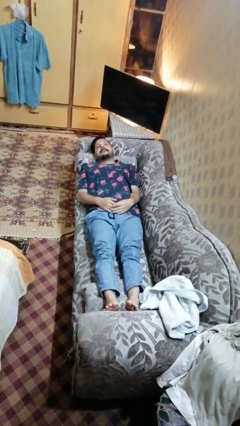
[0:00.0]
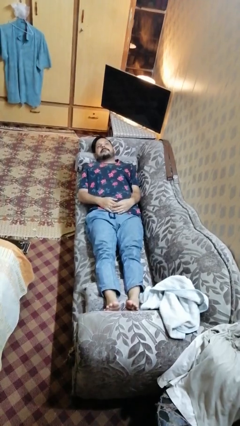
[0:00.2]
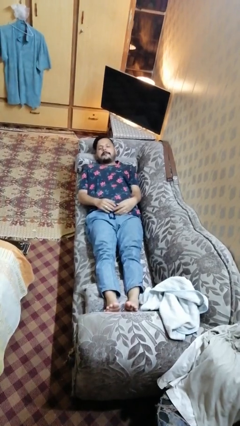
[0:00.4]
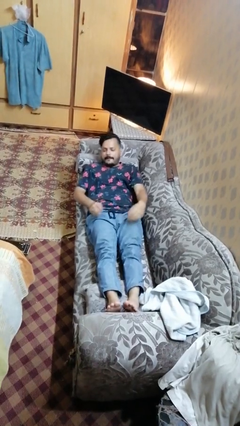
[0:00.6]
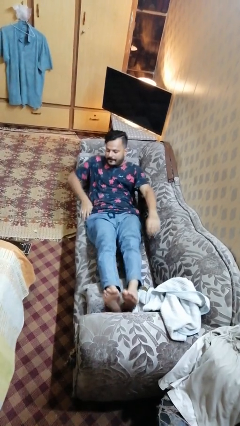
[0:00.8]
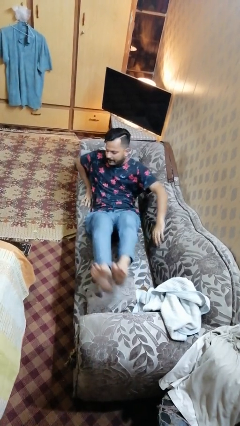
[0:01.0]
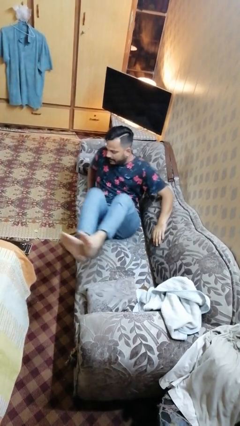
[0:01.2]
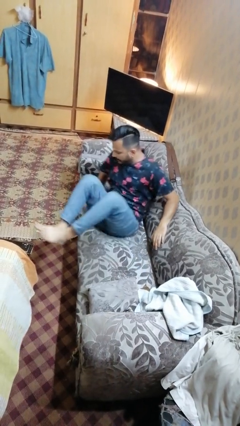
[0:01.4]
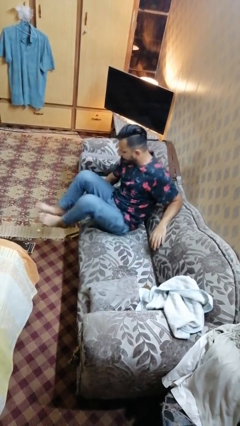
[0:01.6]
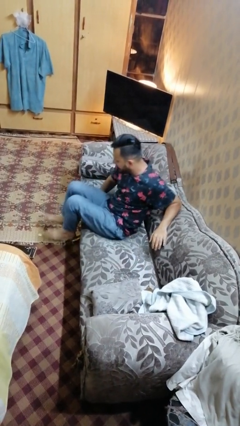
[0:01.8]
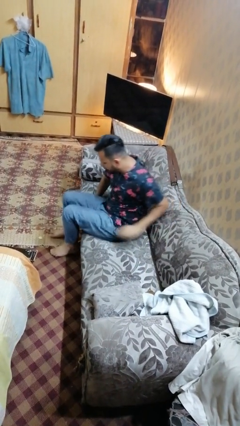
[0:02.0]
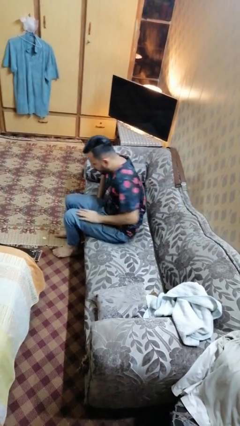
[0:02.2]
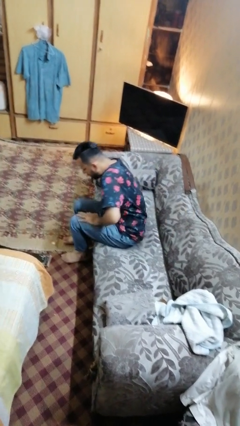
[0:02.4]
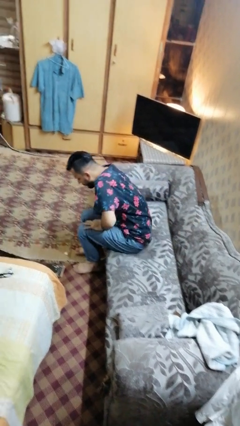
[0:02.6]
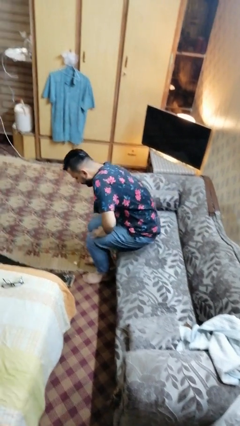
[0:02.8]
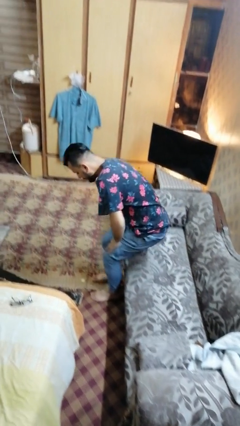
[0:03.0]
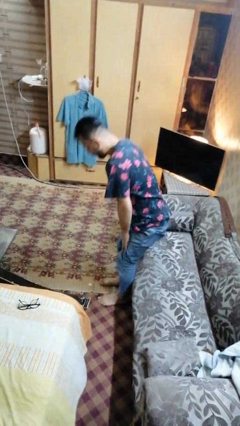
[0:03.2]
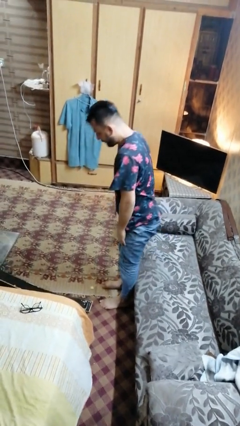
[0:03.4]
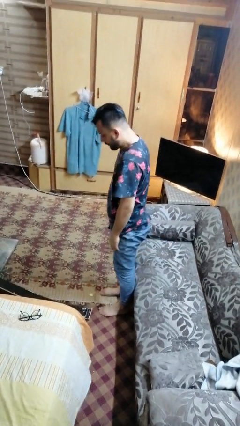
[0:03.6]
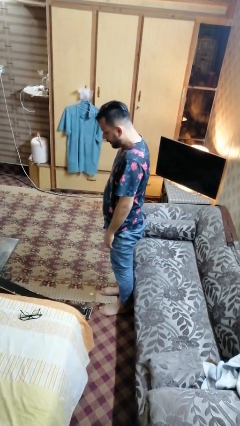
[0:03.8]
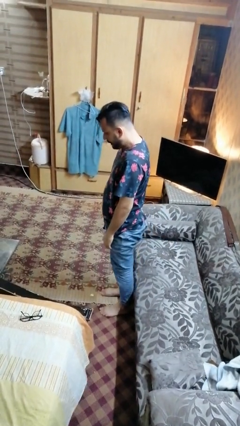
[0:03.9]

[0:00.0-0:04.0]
person stands up

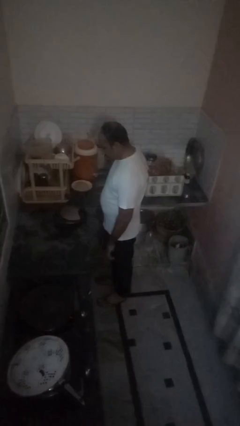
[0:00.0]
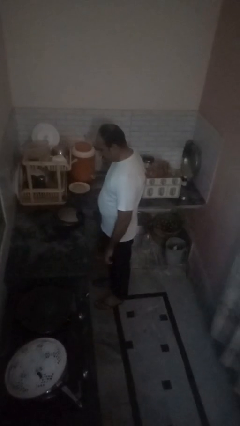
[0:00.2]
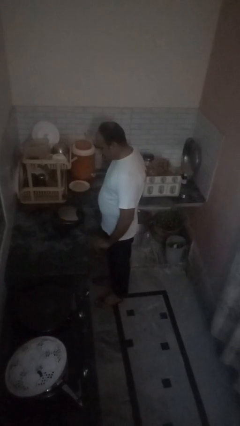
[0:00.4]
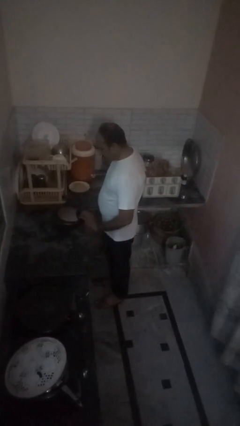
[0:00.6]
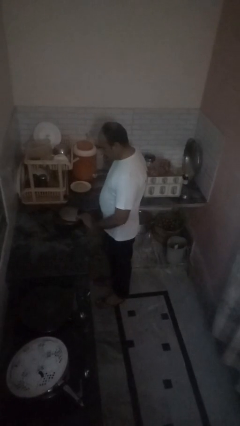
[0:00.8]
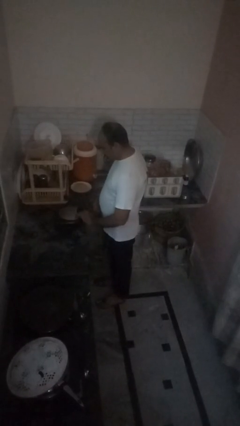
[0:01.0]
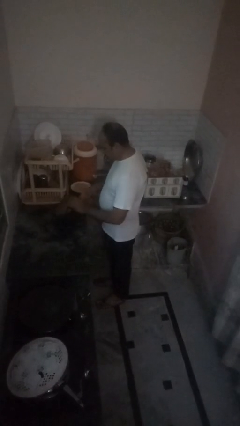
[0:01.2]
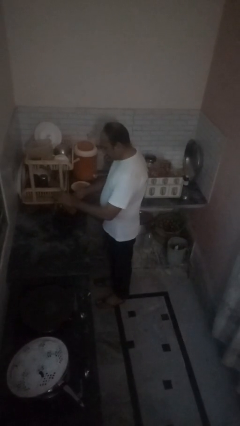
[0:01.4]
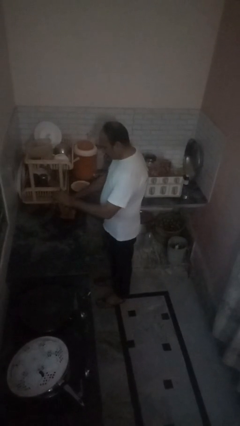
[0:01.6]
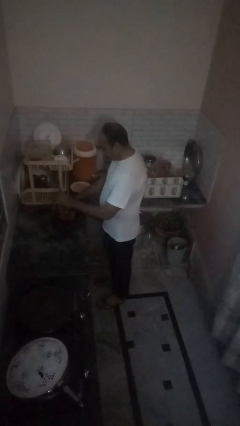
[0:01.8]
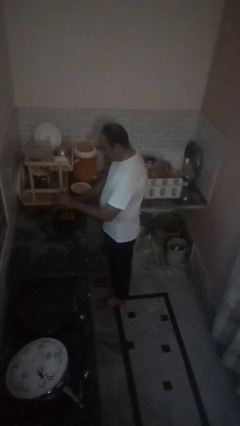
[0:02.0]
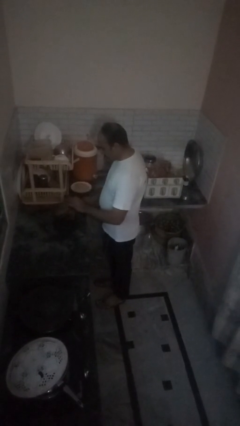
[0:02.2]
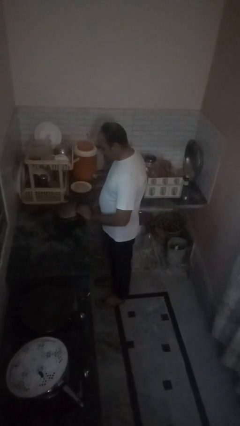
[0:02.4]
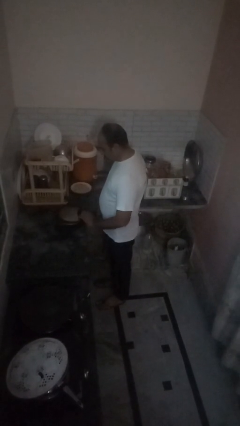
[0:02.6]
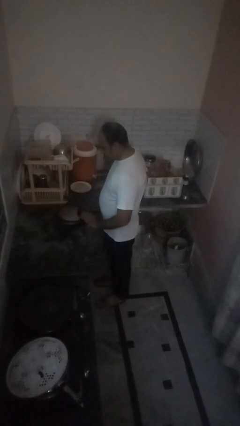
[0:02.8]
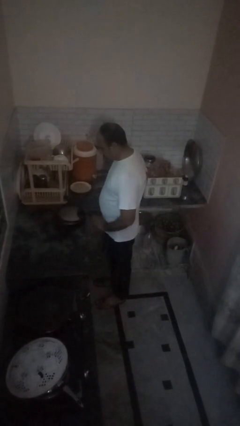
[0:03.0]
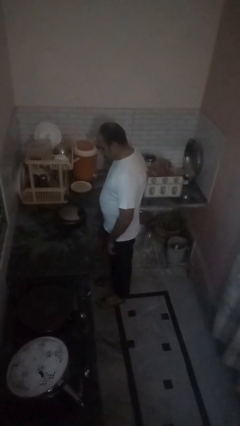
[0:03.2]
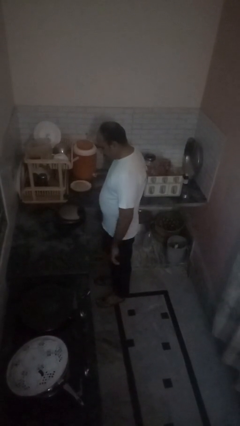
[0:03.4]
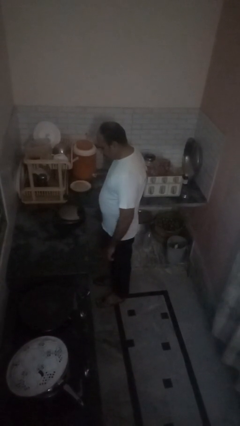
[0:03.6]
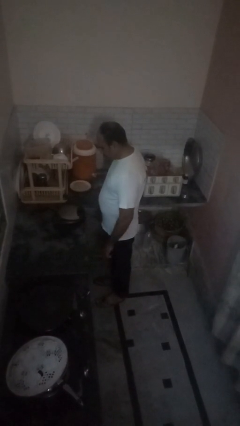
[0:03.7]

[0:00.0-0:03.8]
person puts object into toaster

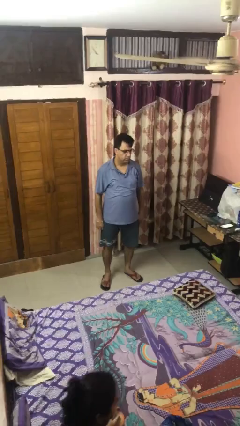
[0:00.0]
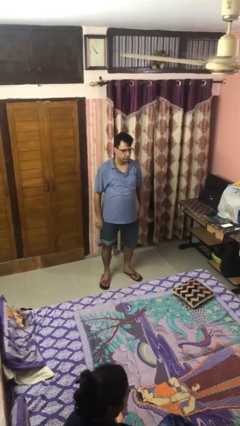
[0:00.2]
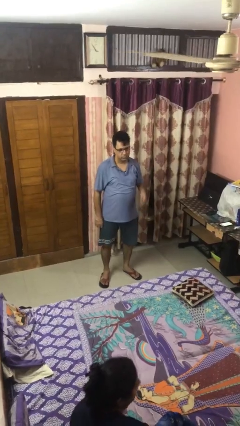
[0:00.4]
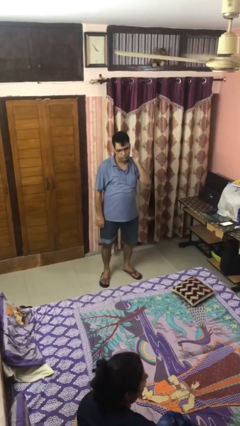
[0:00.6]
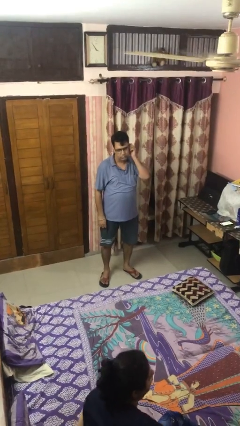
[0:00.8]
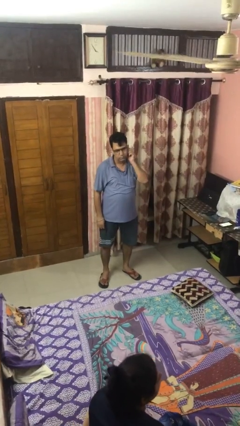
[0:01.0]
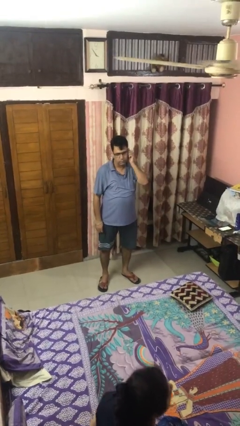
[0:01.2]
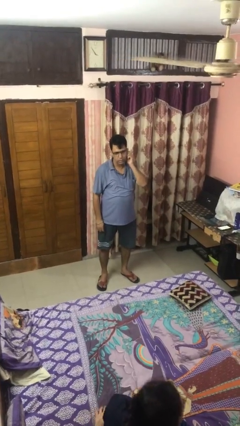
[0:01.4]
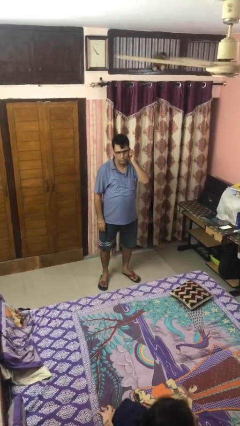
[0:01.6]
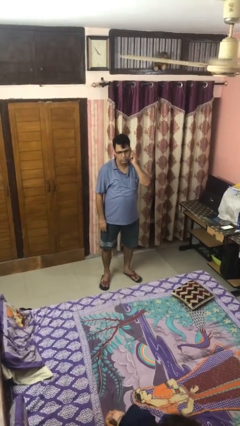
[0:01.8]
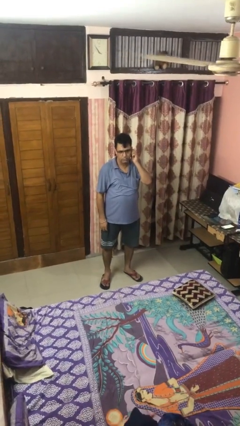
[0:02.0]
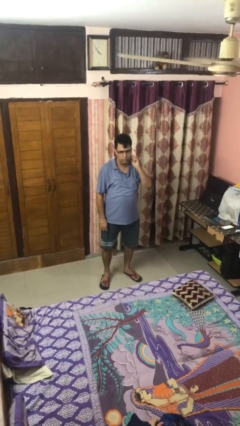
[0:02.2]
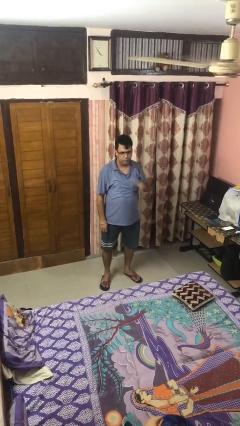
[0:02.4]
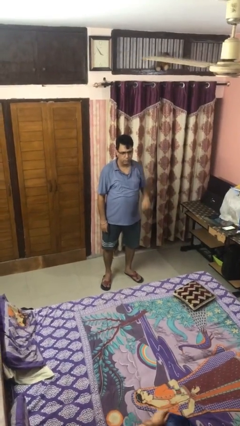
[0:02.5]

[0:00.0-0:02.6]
person touches earlobe

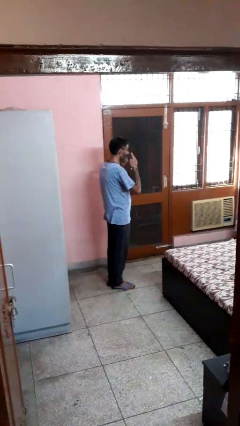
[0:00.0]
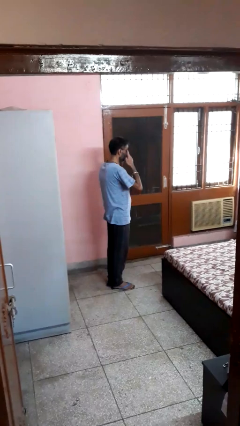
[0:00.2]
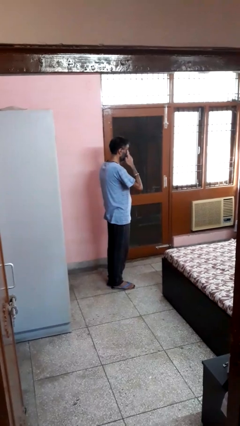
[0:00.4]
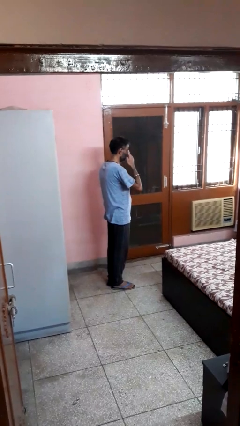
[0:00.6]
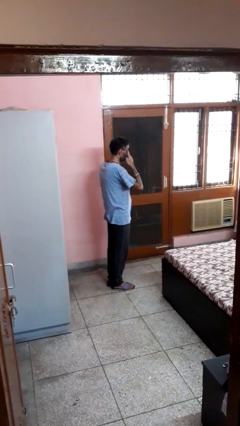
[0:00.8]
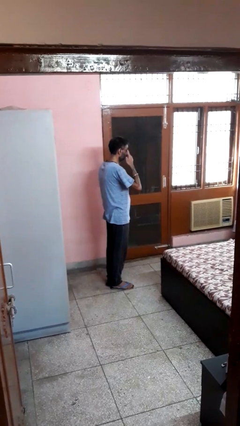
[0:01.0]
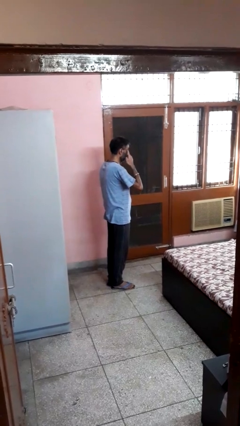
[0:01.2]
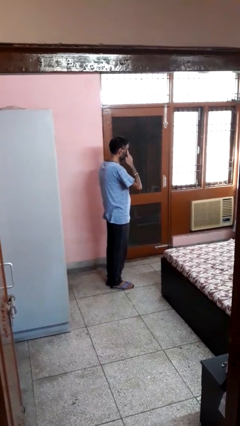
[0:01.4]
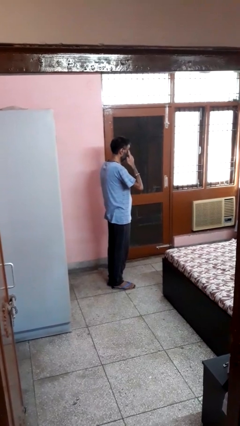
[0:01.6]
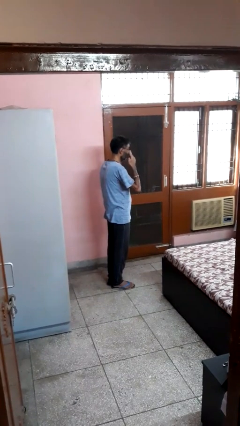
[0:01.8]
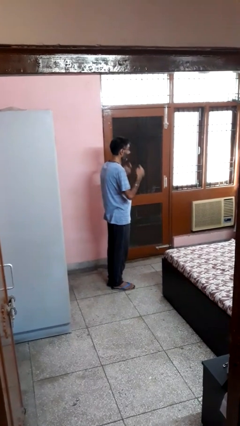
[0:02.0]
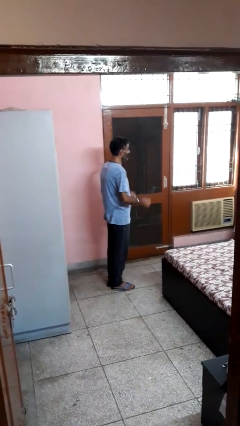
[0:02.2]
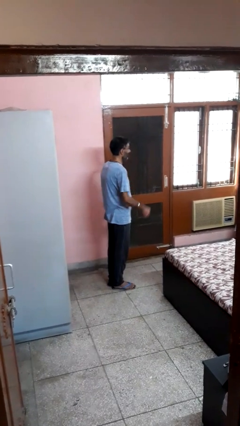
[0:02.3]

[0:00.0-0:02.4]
person rubs eyes

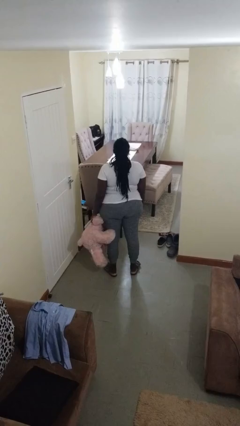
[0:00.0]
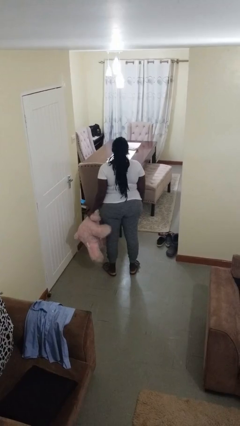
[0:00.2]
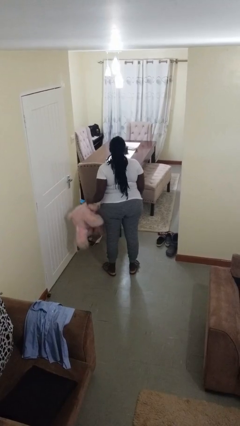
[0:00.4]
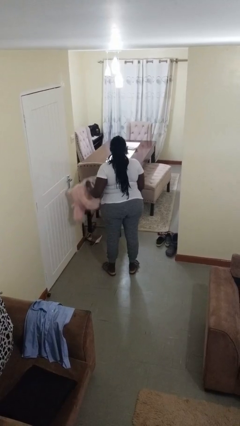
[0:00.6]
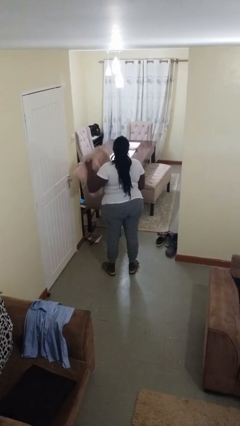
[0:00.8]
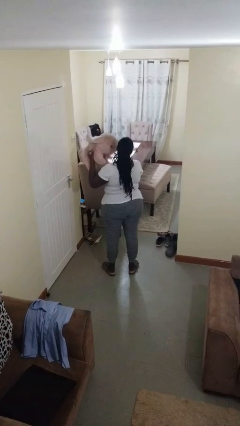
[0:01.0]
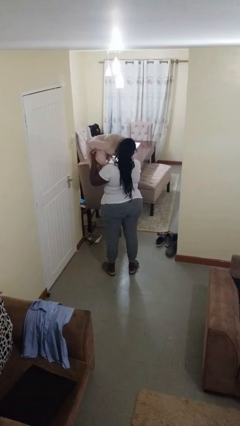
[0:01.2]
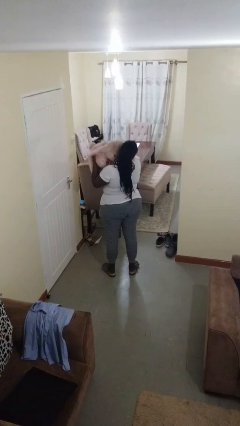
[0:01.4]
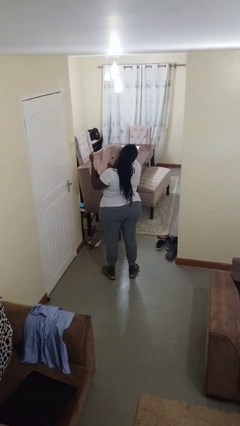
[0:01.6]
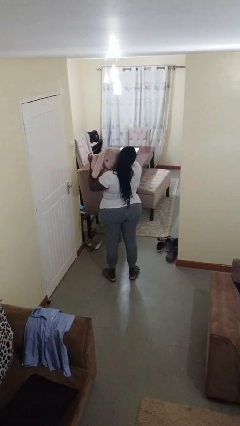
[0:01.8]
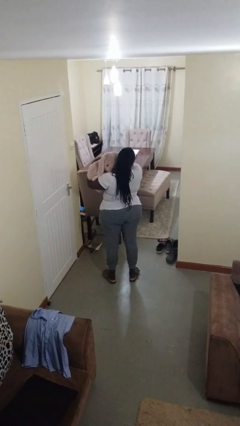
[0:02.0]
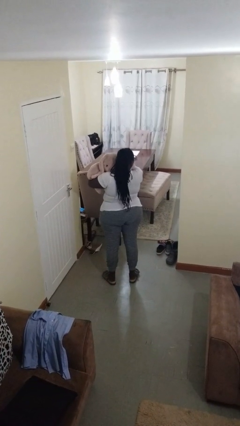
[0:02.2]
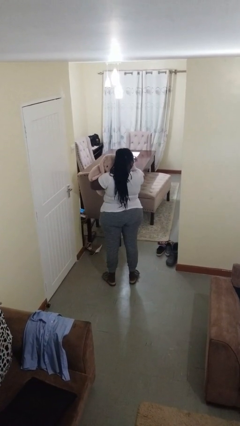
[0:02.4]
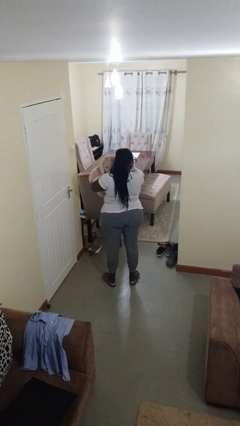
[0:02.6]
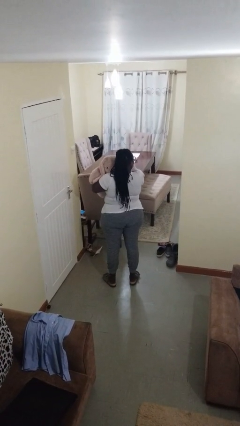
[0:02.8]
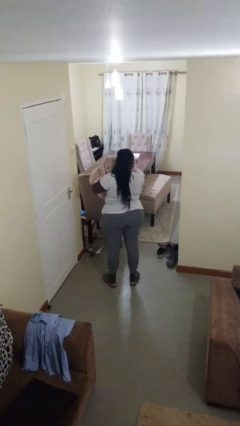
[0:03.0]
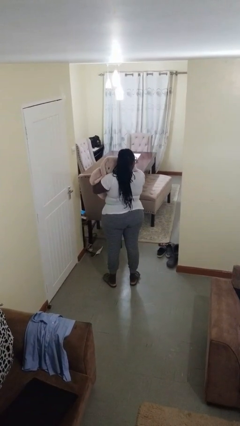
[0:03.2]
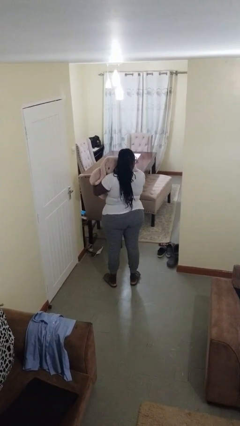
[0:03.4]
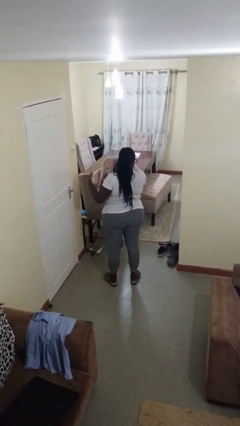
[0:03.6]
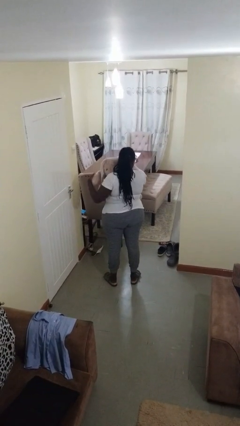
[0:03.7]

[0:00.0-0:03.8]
person hugs stuffed animal

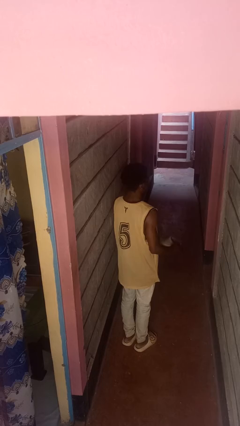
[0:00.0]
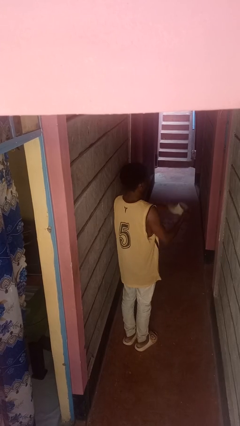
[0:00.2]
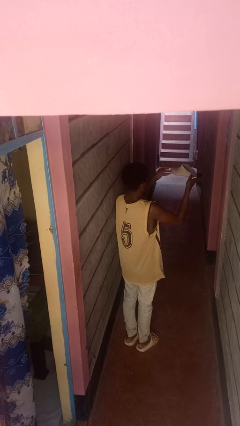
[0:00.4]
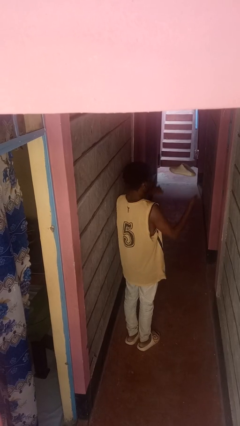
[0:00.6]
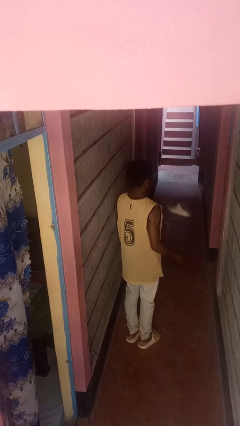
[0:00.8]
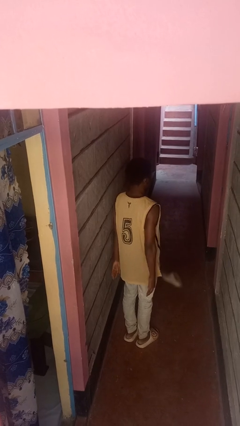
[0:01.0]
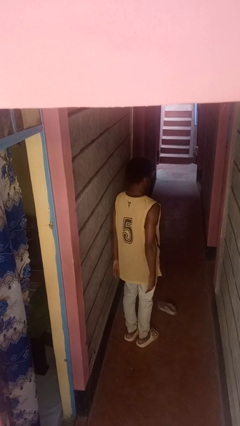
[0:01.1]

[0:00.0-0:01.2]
person throws object into air
